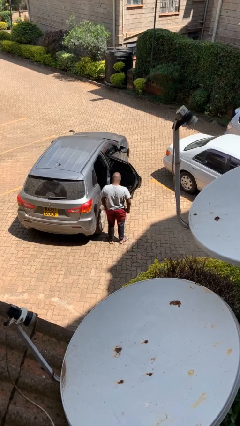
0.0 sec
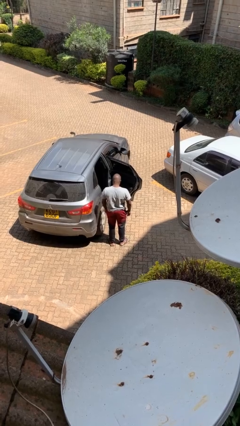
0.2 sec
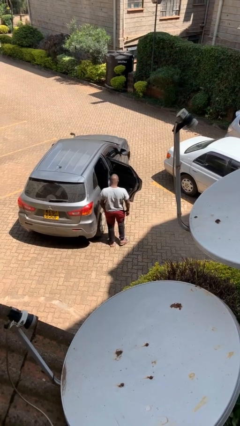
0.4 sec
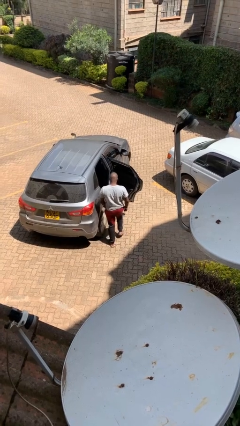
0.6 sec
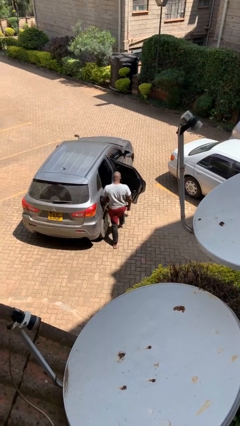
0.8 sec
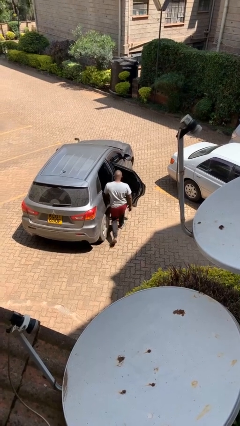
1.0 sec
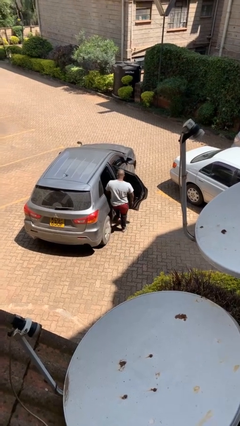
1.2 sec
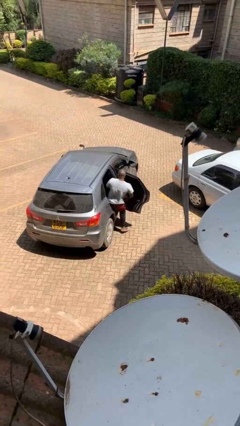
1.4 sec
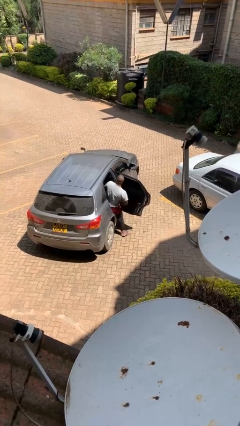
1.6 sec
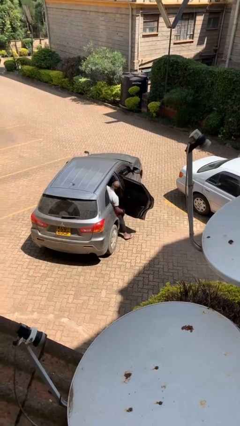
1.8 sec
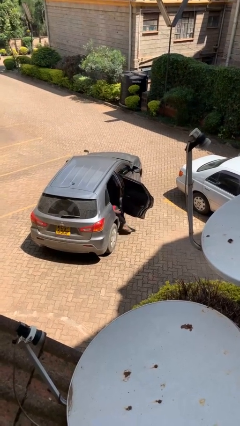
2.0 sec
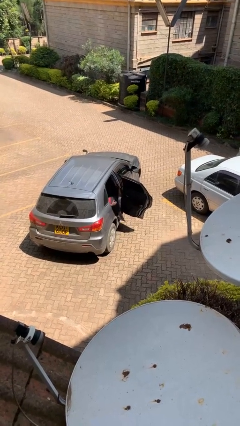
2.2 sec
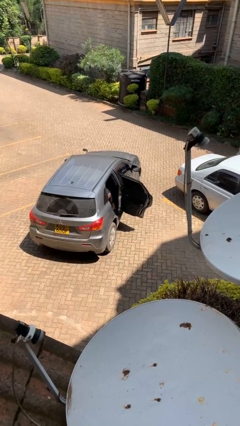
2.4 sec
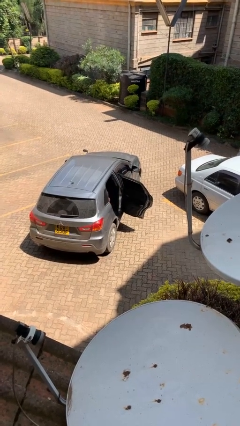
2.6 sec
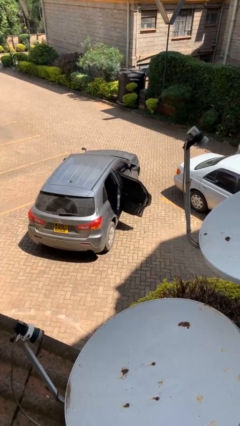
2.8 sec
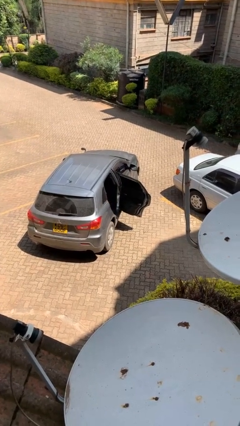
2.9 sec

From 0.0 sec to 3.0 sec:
person enters car

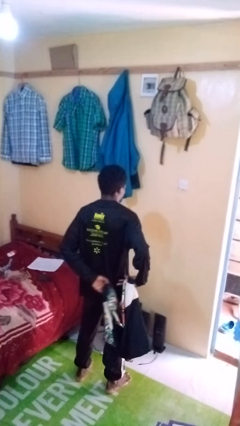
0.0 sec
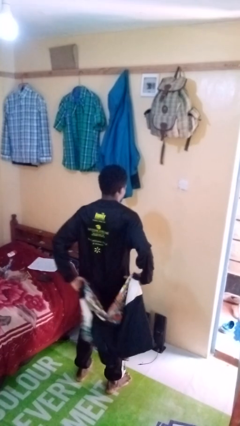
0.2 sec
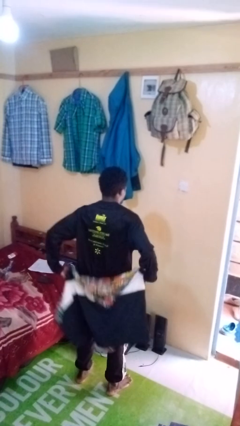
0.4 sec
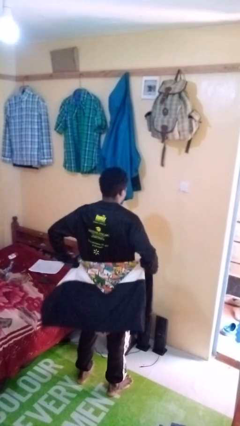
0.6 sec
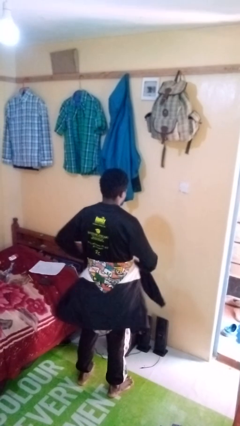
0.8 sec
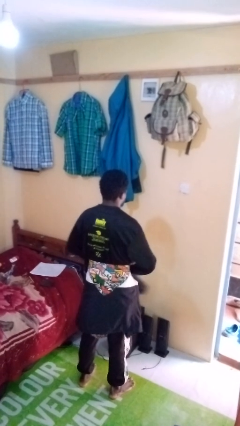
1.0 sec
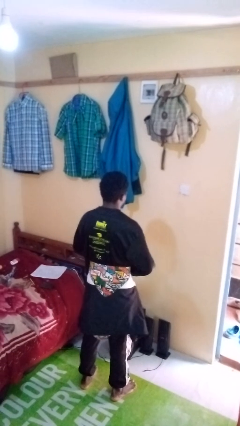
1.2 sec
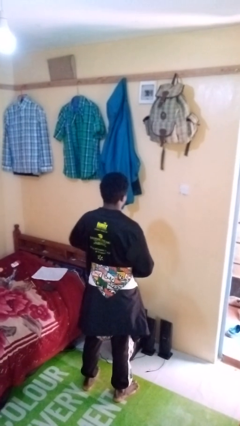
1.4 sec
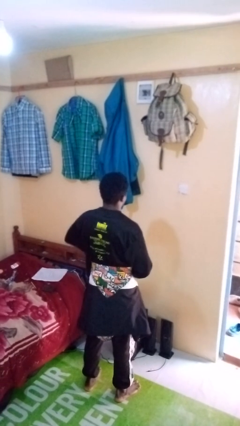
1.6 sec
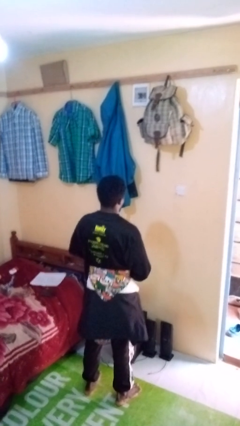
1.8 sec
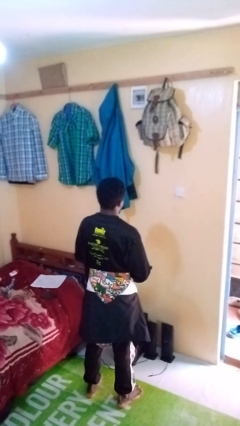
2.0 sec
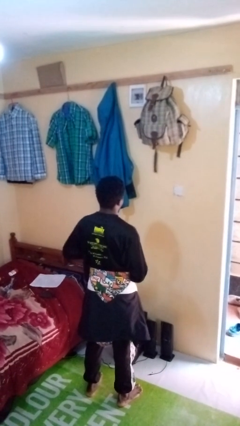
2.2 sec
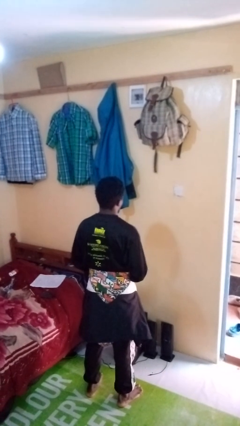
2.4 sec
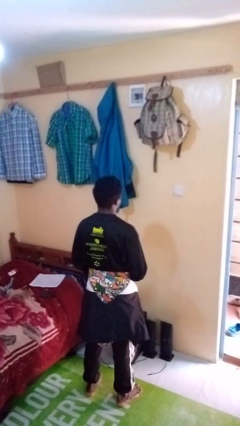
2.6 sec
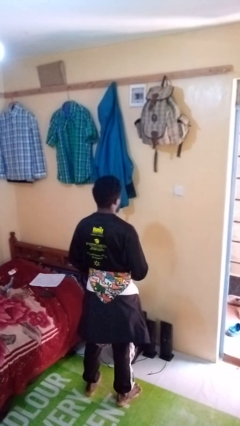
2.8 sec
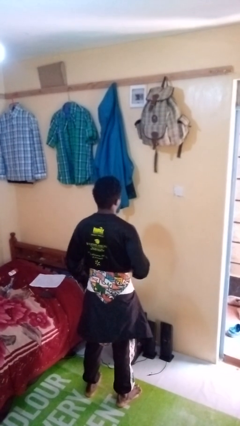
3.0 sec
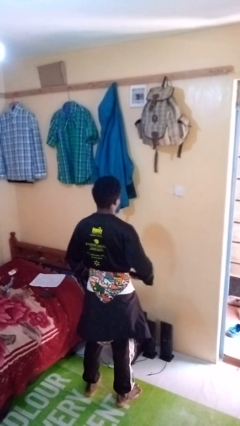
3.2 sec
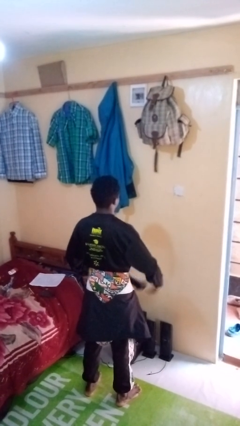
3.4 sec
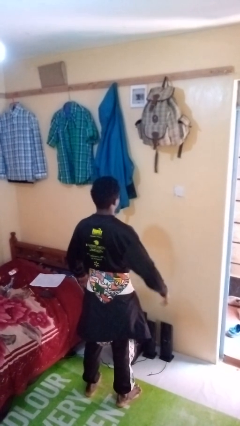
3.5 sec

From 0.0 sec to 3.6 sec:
person ties jacket around waist

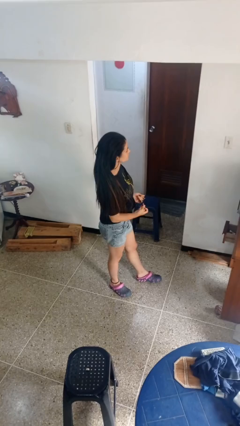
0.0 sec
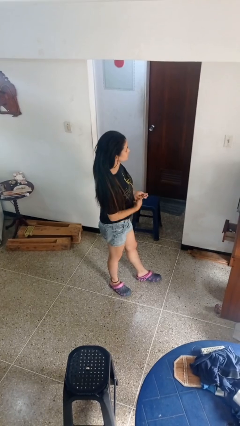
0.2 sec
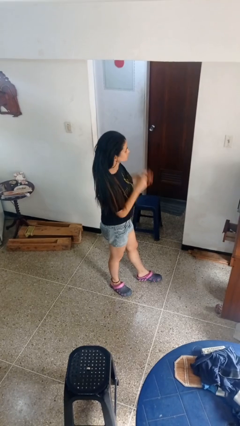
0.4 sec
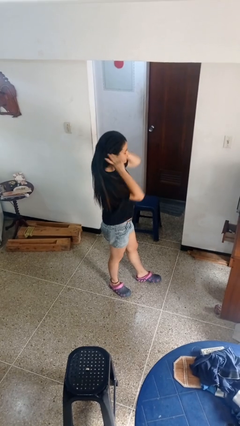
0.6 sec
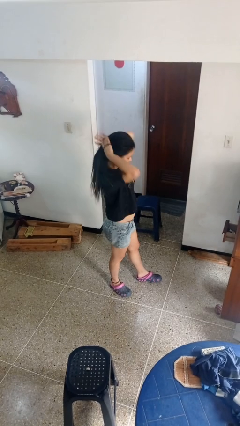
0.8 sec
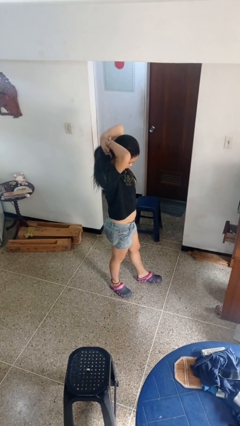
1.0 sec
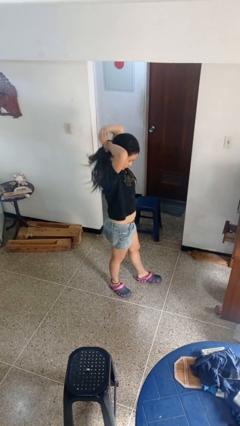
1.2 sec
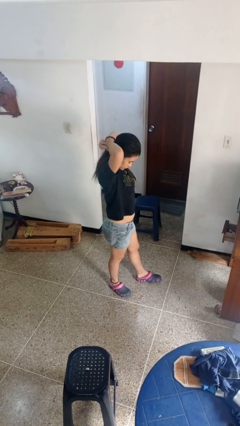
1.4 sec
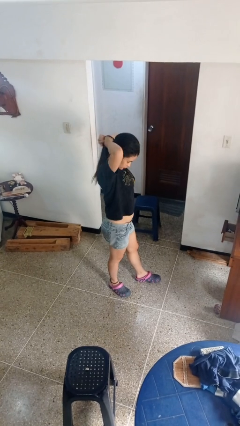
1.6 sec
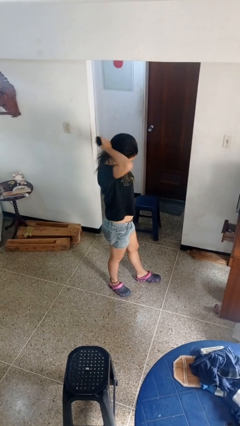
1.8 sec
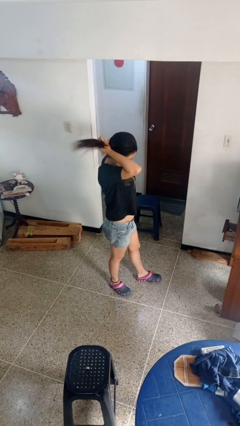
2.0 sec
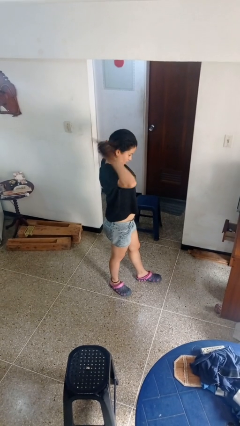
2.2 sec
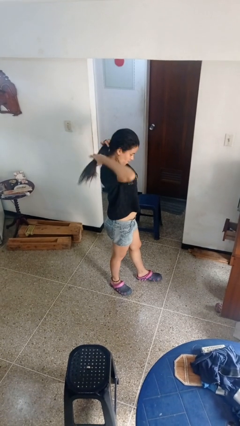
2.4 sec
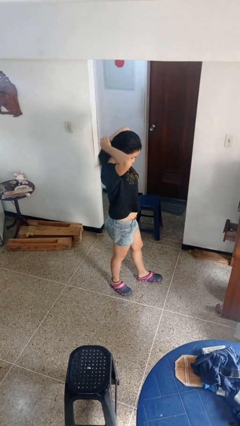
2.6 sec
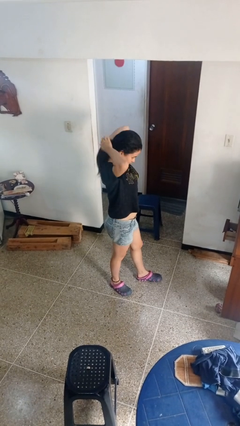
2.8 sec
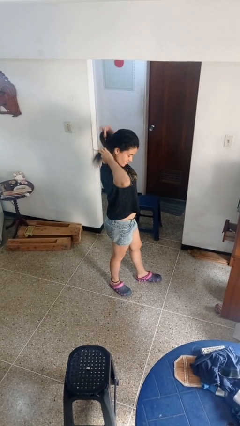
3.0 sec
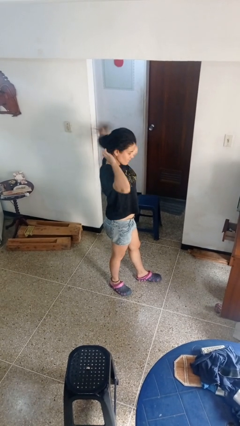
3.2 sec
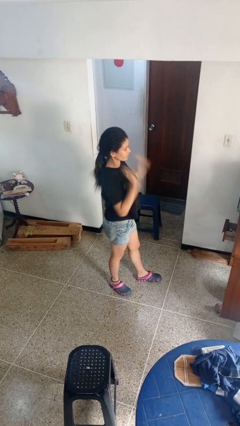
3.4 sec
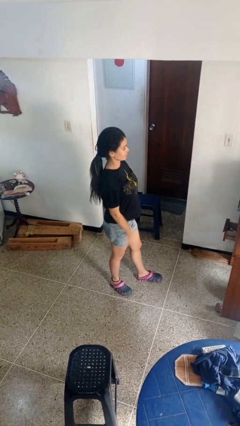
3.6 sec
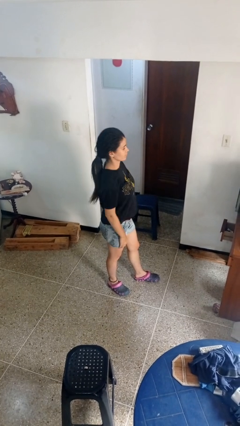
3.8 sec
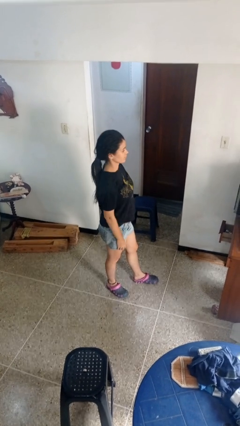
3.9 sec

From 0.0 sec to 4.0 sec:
person puts hair in ponytail

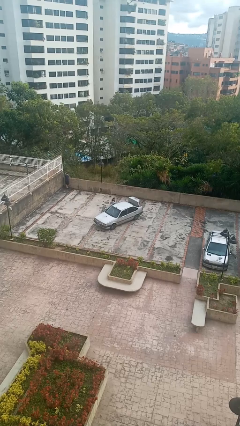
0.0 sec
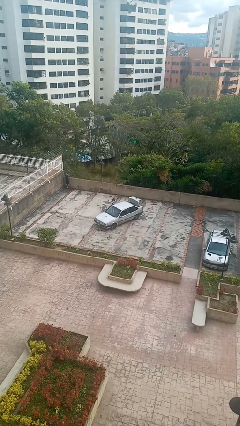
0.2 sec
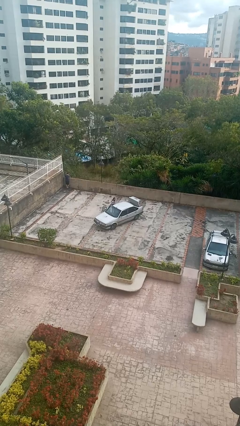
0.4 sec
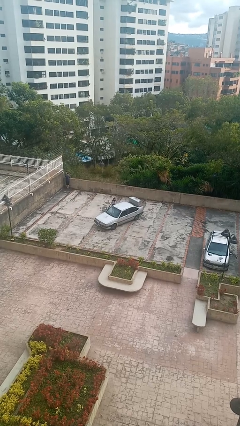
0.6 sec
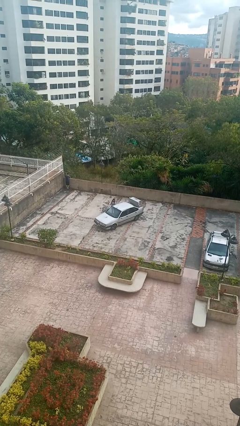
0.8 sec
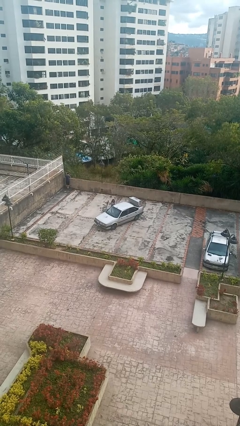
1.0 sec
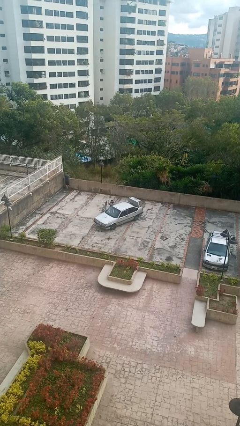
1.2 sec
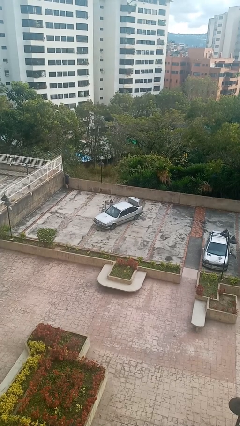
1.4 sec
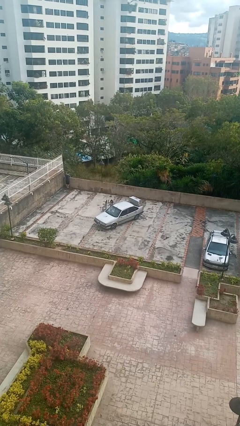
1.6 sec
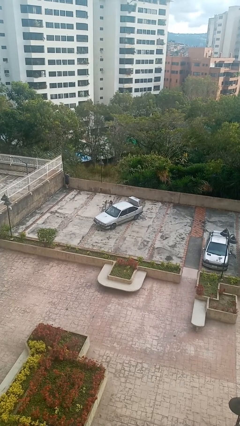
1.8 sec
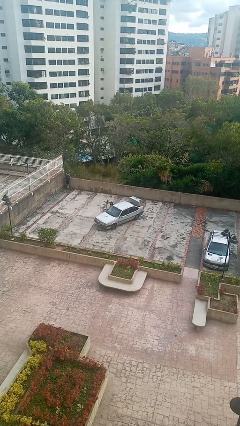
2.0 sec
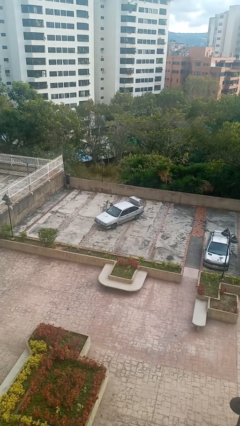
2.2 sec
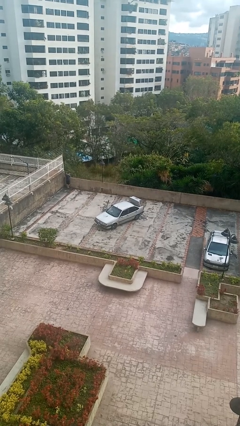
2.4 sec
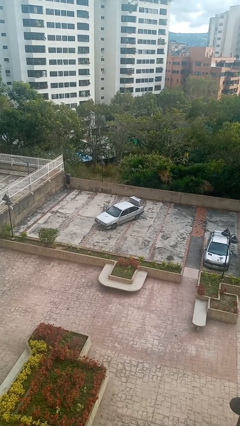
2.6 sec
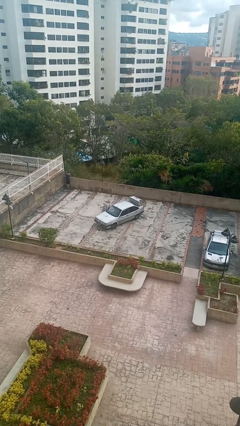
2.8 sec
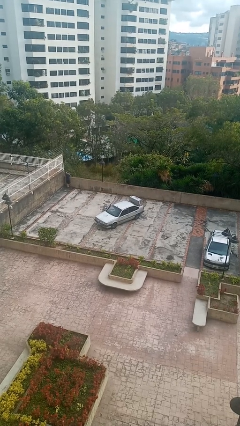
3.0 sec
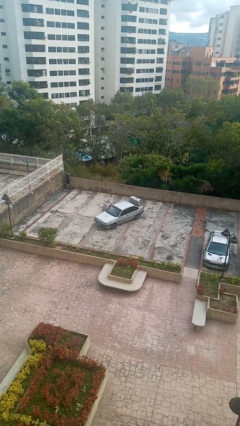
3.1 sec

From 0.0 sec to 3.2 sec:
car picks up person

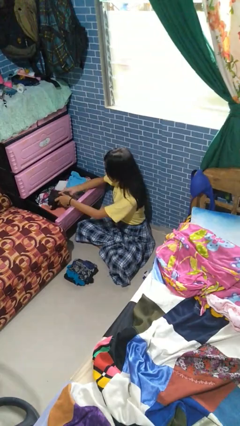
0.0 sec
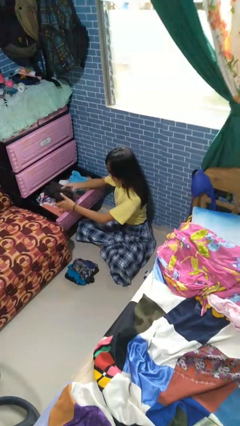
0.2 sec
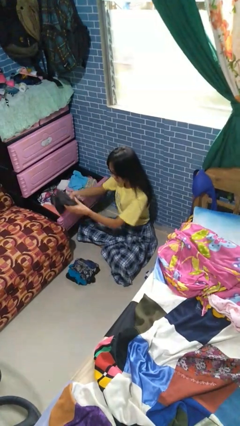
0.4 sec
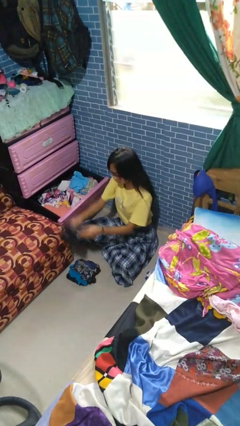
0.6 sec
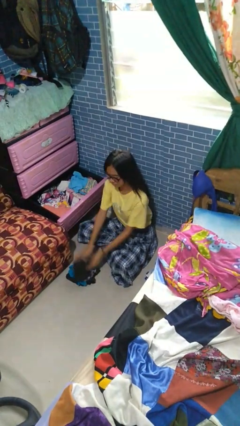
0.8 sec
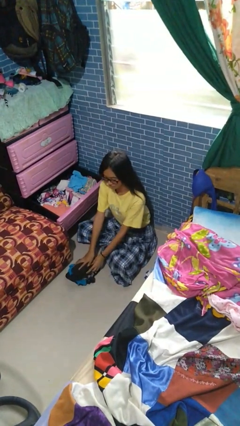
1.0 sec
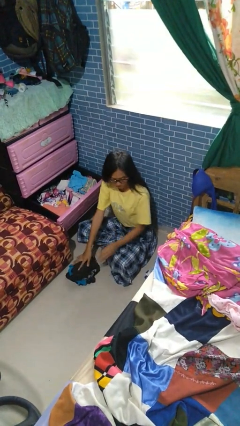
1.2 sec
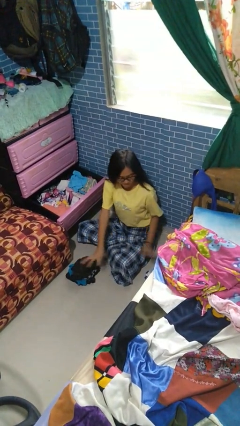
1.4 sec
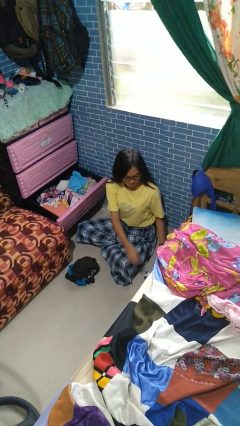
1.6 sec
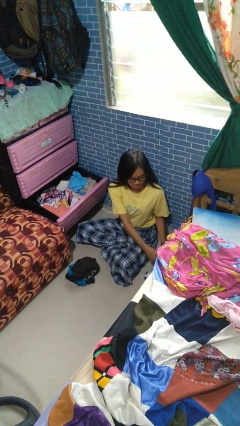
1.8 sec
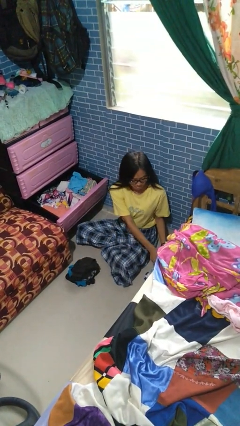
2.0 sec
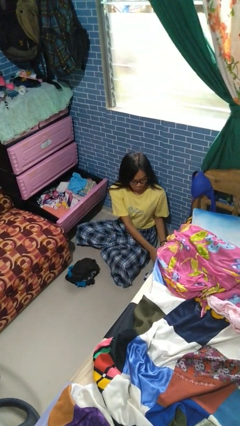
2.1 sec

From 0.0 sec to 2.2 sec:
person takes clothes from dresser

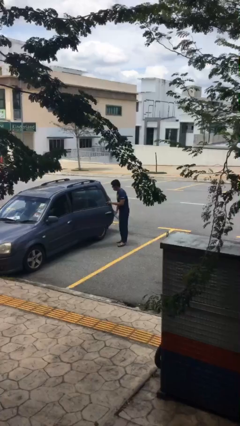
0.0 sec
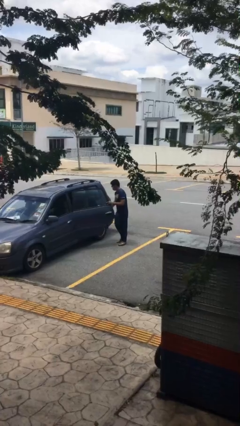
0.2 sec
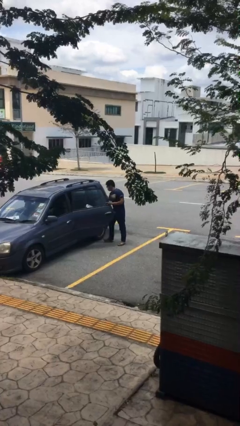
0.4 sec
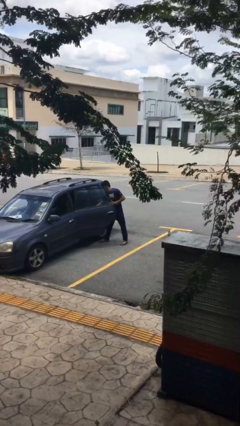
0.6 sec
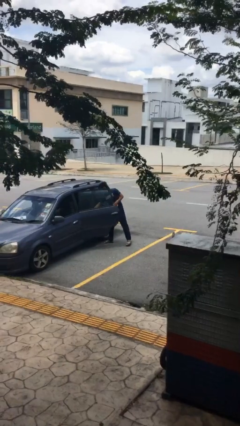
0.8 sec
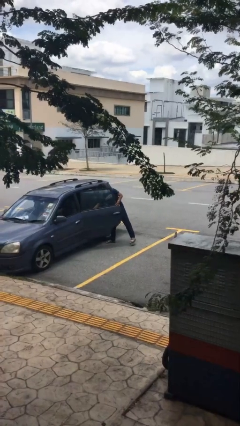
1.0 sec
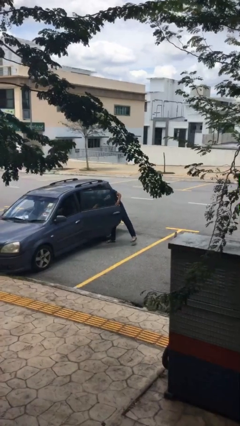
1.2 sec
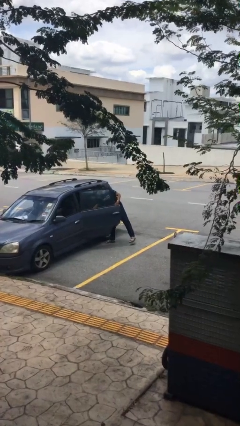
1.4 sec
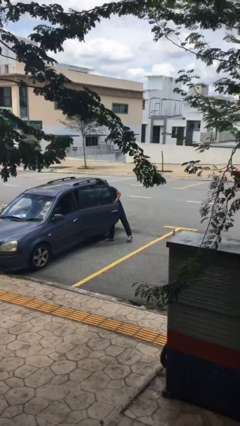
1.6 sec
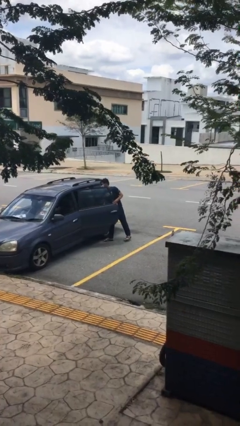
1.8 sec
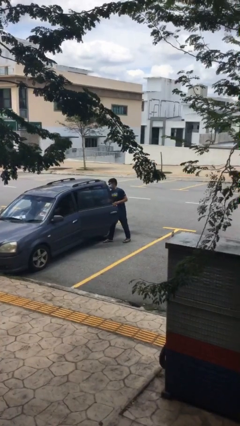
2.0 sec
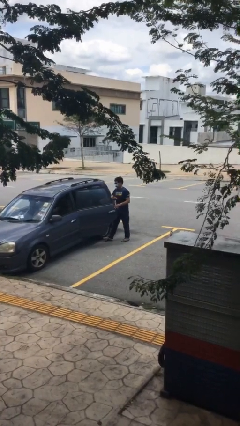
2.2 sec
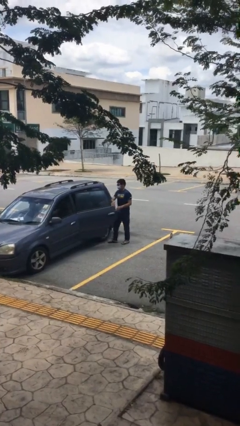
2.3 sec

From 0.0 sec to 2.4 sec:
person loads car
